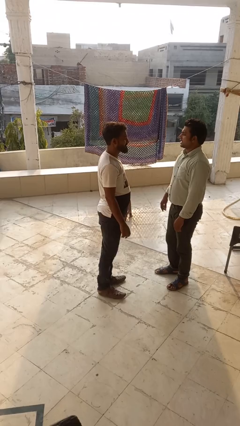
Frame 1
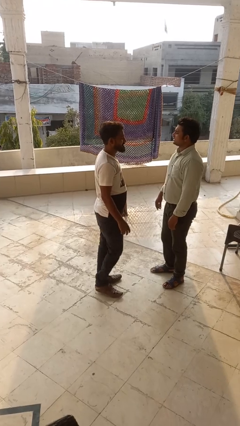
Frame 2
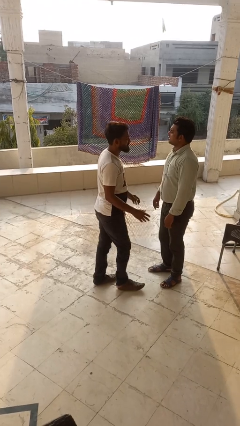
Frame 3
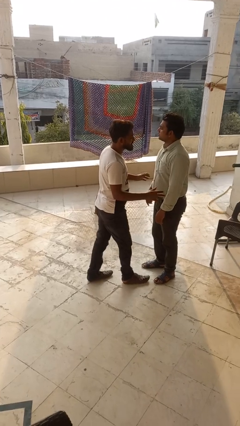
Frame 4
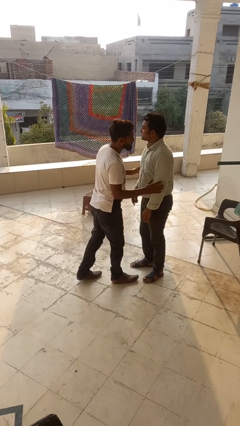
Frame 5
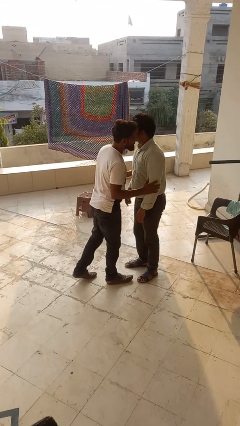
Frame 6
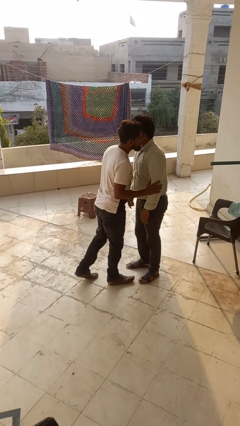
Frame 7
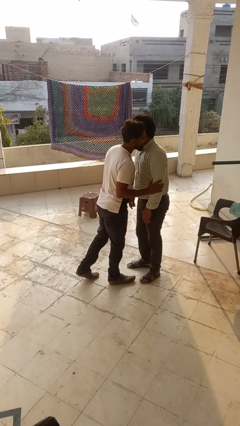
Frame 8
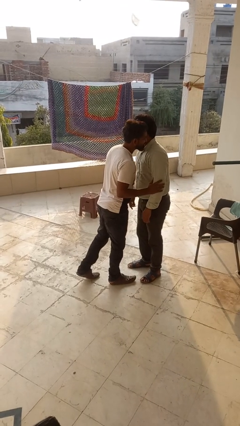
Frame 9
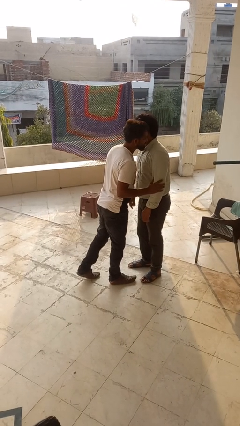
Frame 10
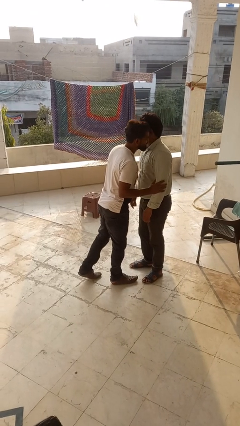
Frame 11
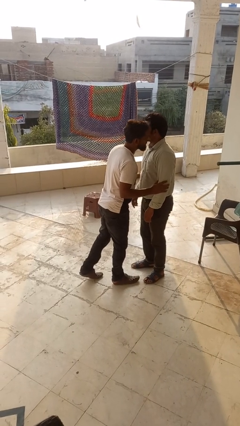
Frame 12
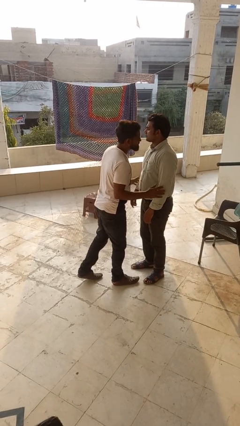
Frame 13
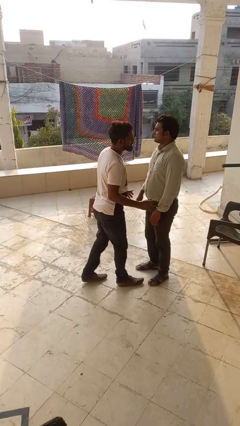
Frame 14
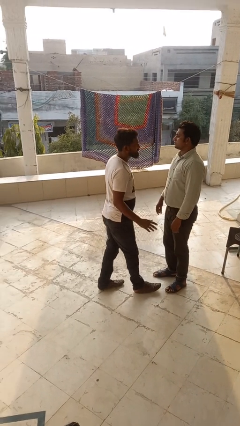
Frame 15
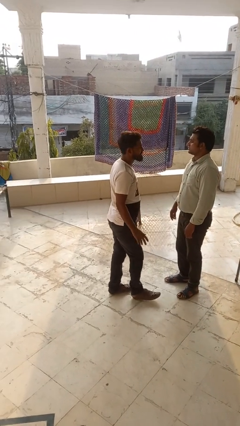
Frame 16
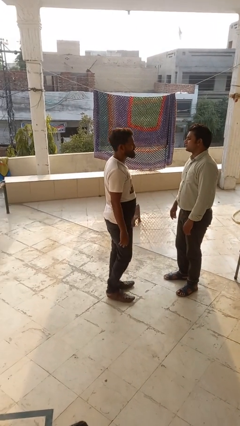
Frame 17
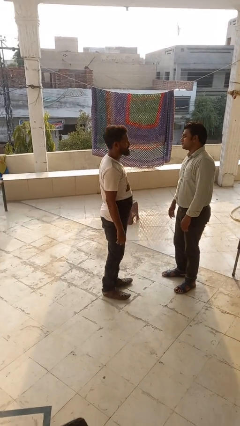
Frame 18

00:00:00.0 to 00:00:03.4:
person kisses cheek of person

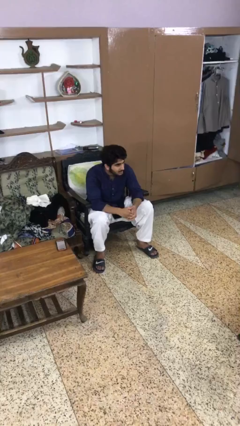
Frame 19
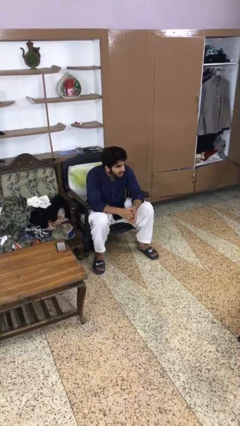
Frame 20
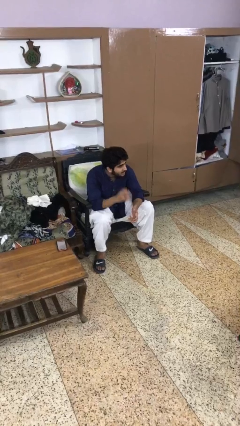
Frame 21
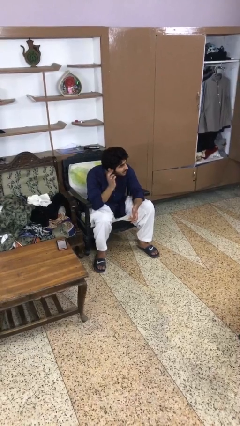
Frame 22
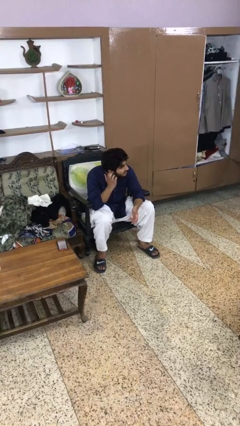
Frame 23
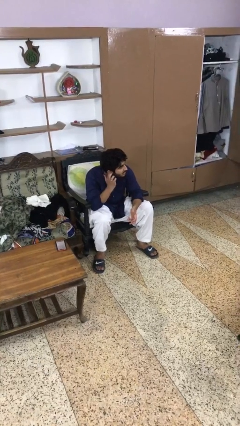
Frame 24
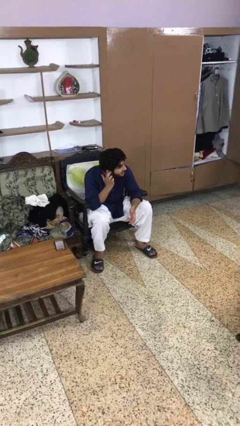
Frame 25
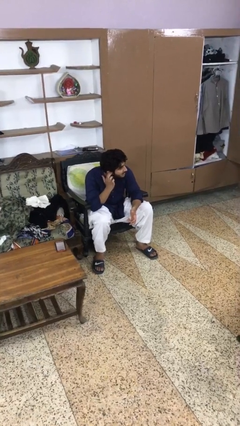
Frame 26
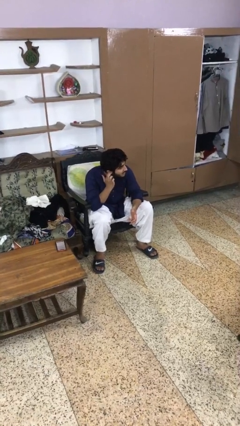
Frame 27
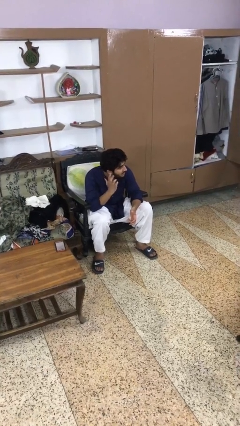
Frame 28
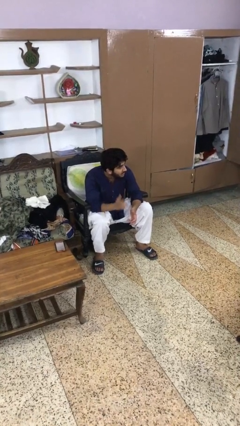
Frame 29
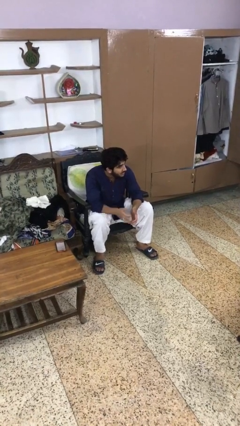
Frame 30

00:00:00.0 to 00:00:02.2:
person puts fingers in ear

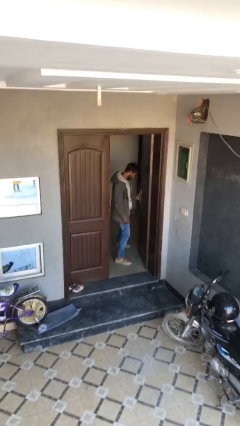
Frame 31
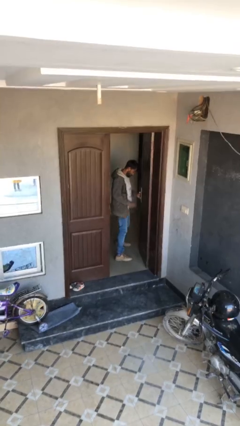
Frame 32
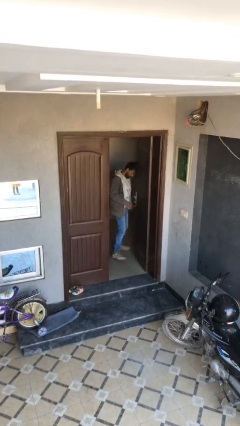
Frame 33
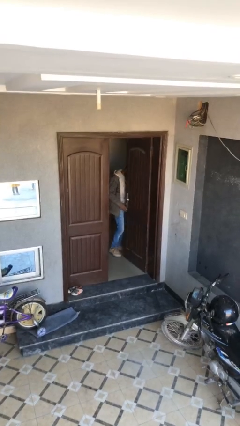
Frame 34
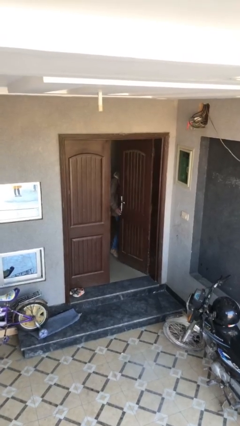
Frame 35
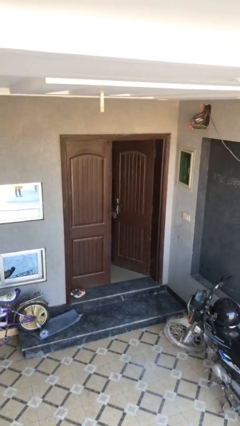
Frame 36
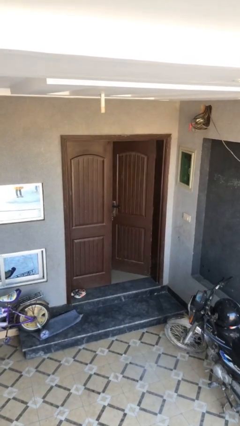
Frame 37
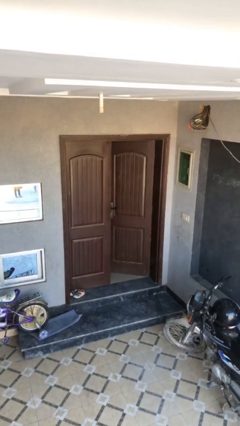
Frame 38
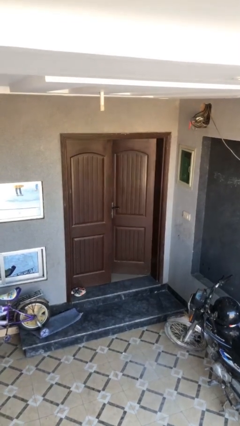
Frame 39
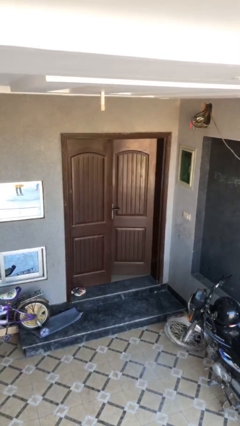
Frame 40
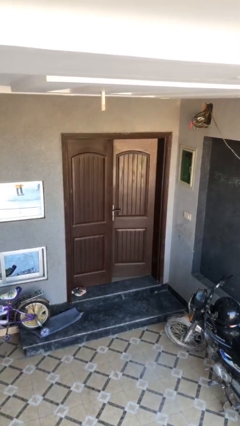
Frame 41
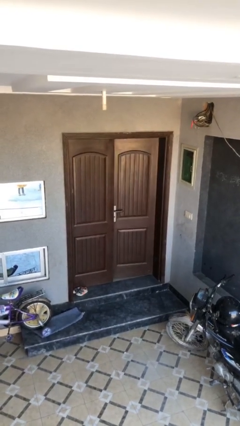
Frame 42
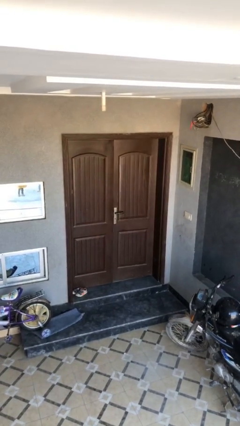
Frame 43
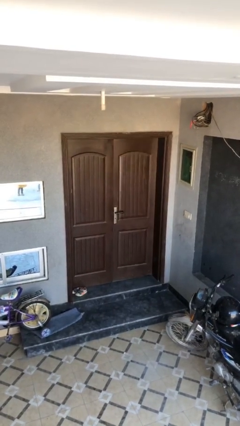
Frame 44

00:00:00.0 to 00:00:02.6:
person closes facility door

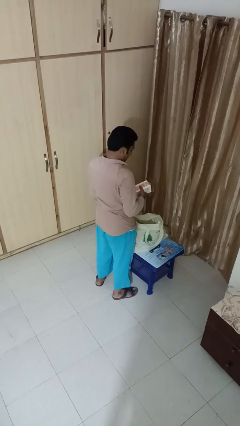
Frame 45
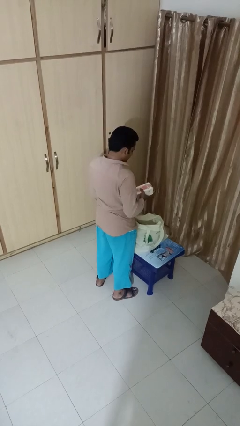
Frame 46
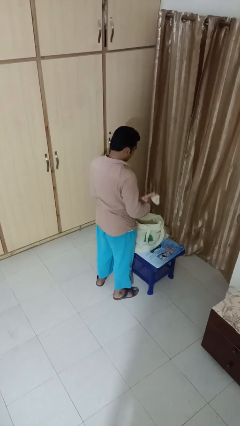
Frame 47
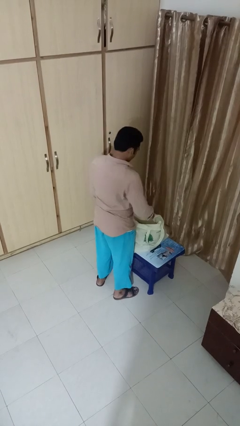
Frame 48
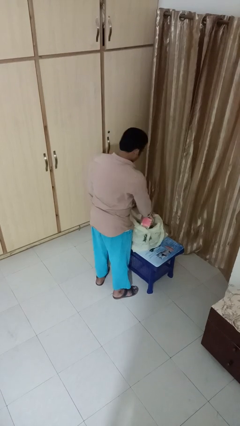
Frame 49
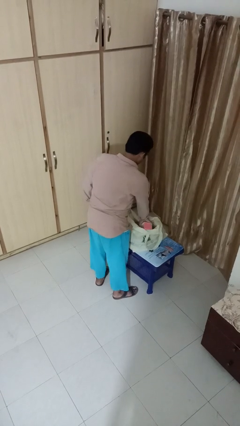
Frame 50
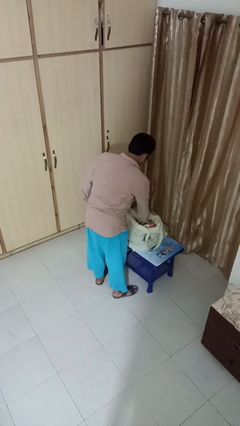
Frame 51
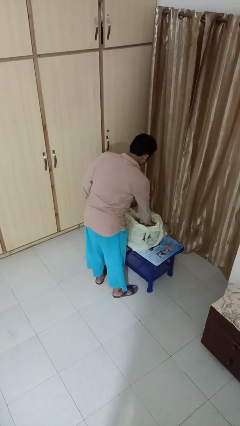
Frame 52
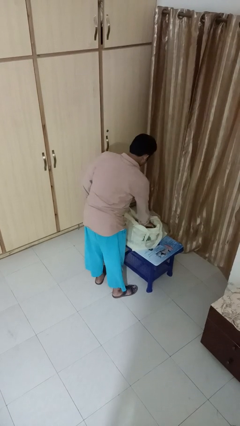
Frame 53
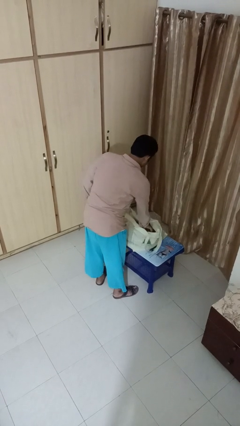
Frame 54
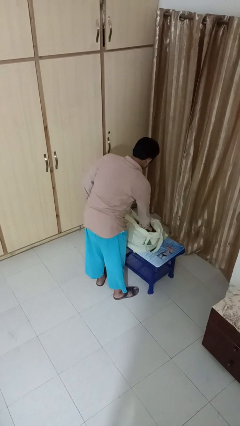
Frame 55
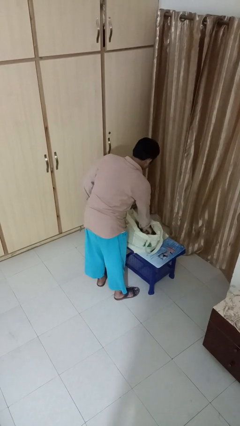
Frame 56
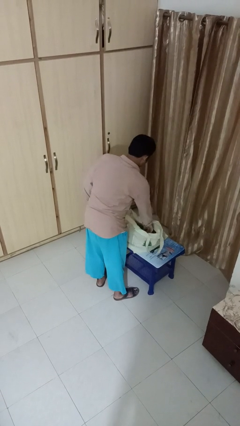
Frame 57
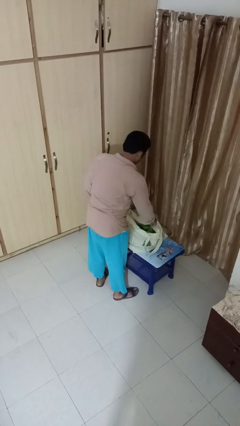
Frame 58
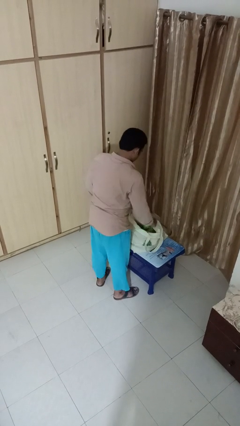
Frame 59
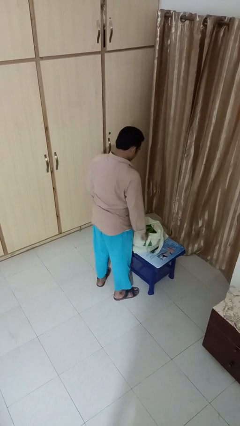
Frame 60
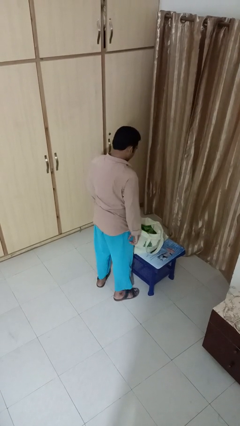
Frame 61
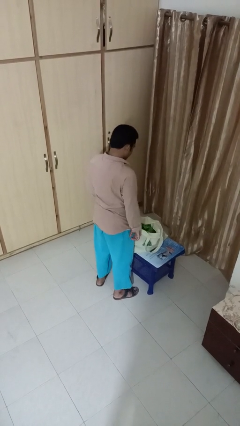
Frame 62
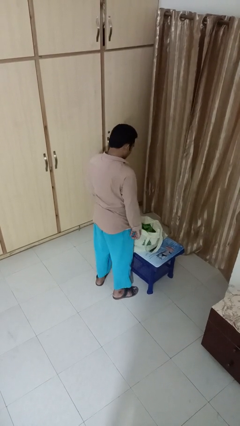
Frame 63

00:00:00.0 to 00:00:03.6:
person puts object into bag

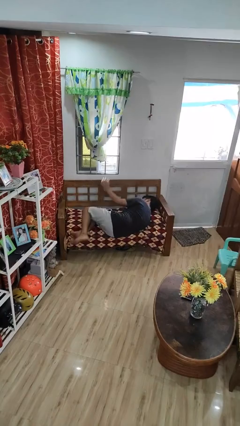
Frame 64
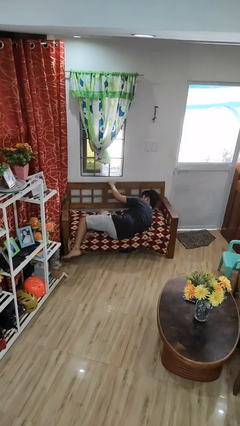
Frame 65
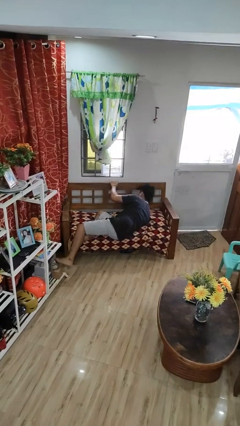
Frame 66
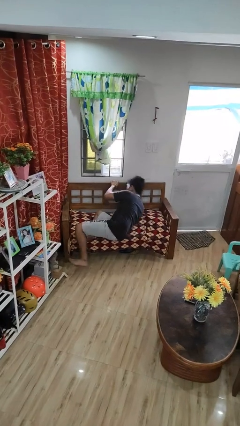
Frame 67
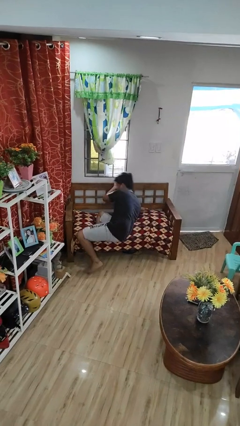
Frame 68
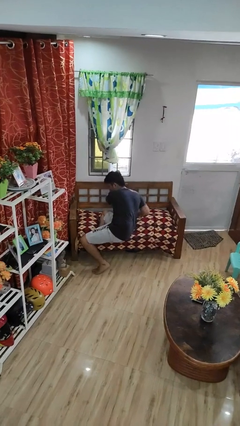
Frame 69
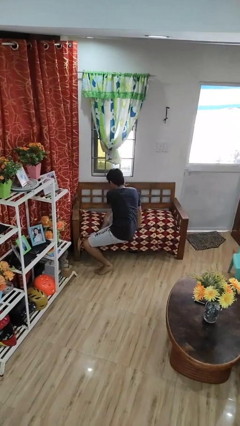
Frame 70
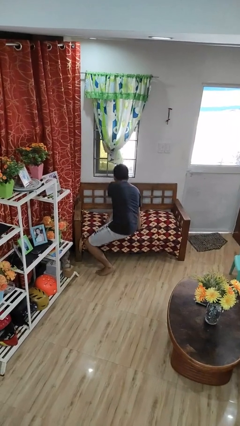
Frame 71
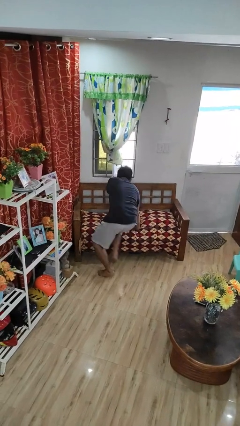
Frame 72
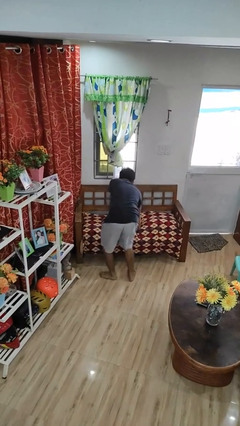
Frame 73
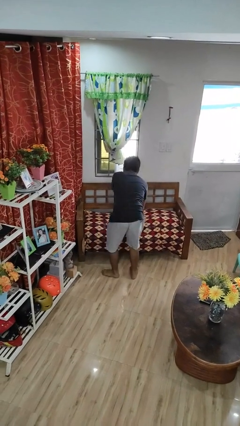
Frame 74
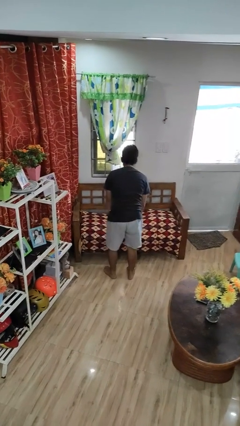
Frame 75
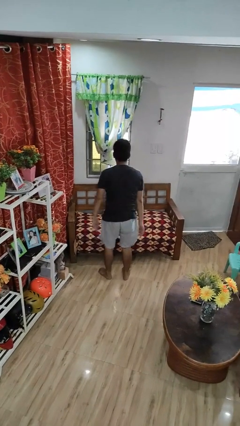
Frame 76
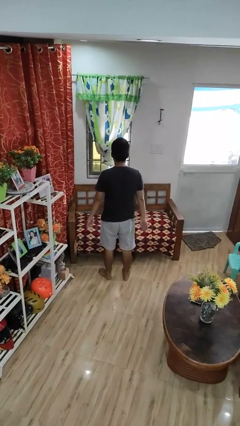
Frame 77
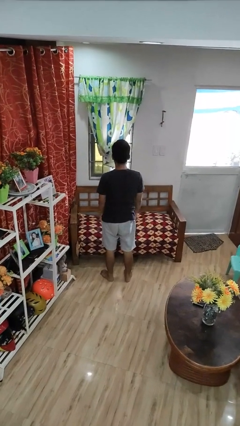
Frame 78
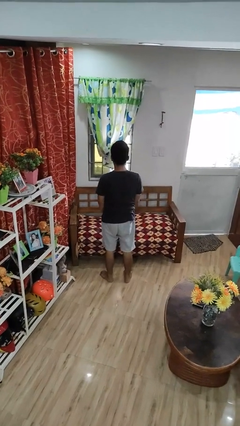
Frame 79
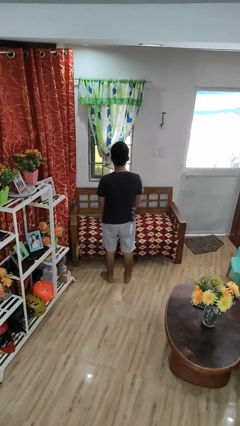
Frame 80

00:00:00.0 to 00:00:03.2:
person stands up

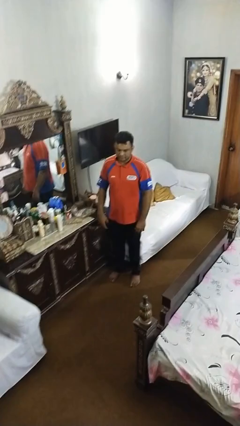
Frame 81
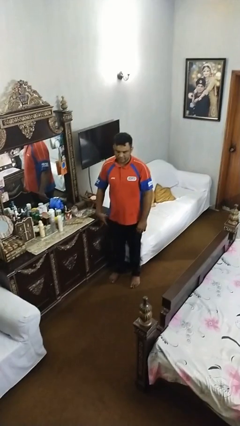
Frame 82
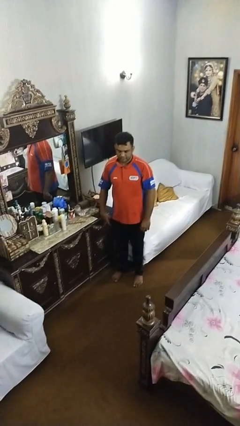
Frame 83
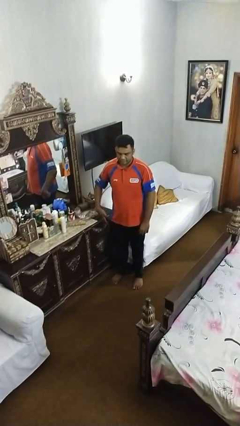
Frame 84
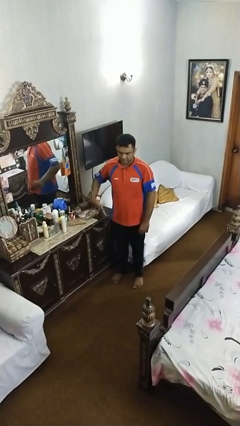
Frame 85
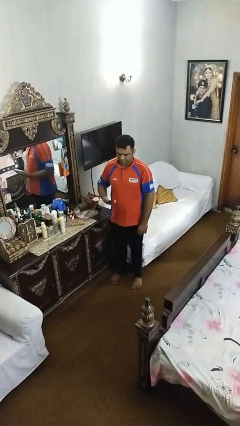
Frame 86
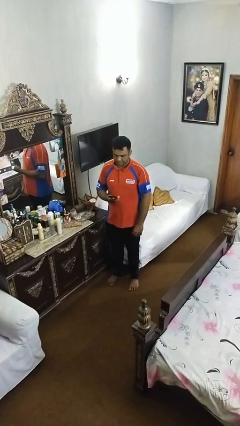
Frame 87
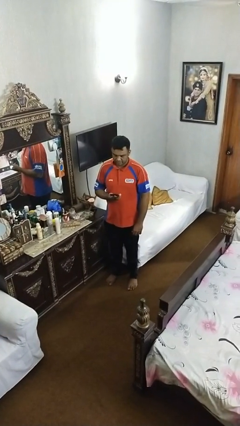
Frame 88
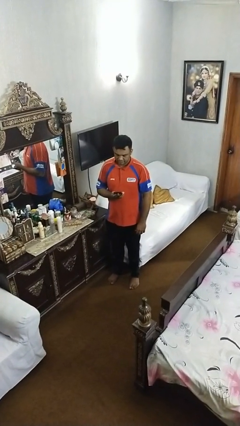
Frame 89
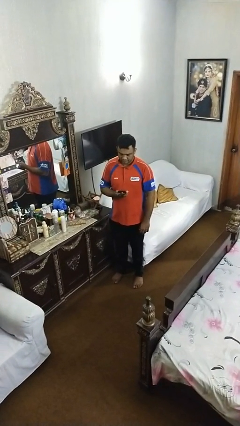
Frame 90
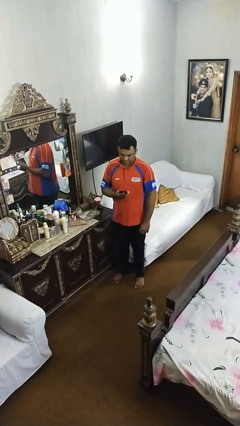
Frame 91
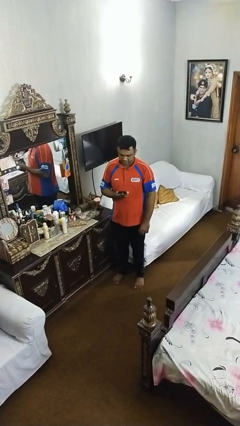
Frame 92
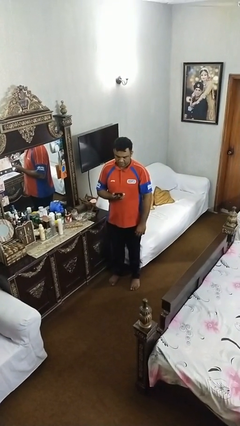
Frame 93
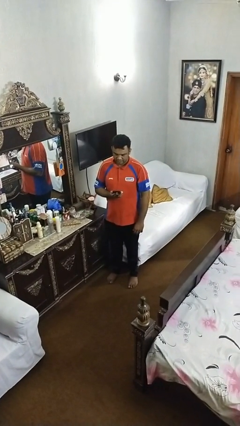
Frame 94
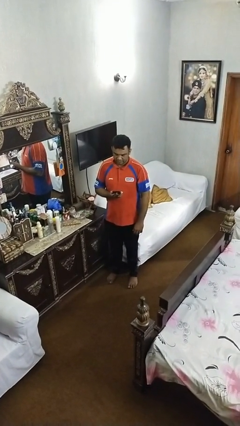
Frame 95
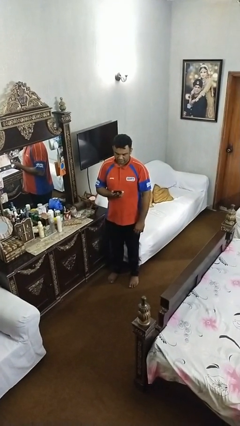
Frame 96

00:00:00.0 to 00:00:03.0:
person takes phone from pocket
